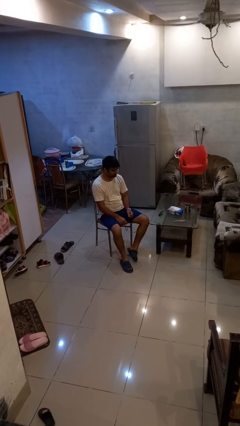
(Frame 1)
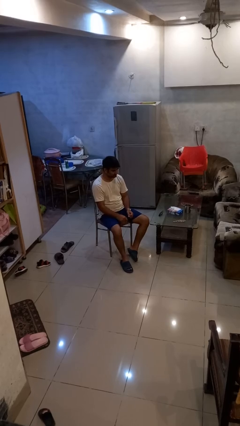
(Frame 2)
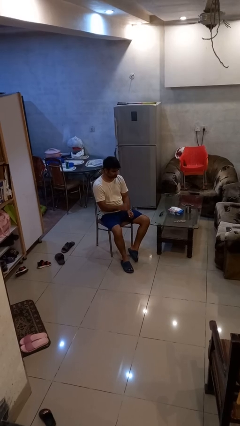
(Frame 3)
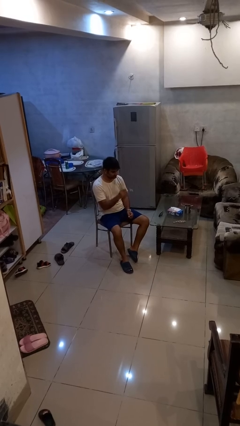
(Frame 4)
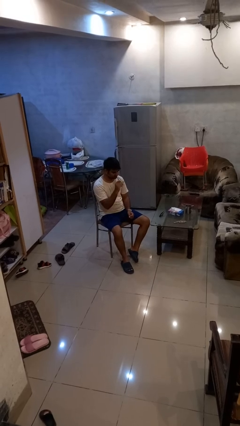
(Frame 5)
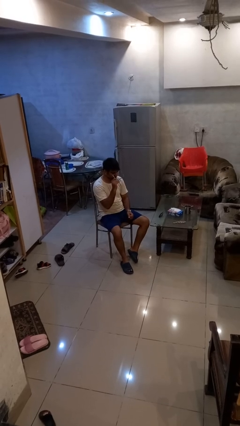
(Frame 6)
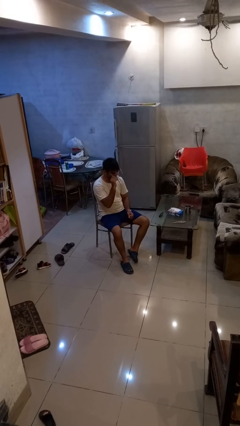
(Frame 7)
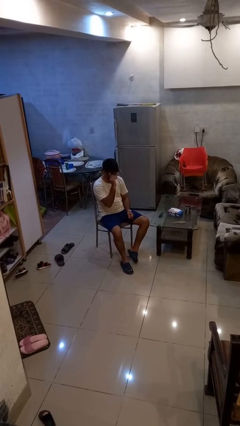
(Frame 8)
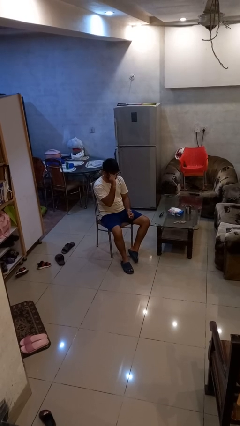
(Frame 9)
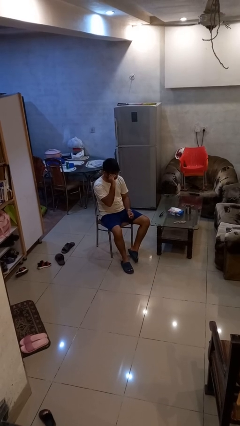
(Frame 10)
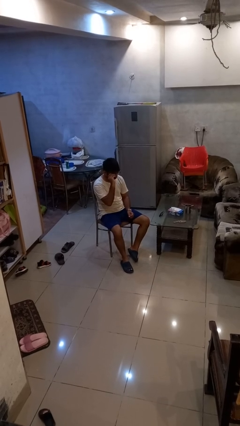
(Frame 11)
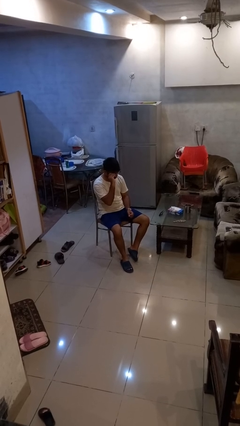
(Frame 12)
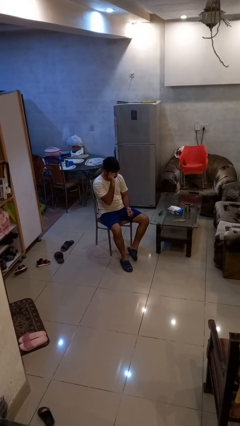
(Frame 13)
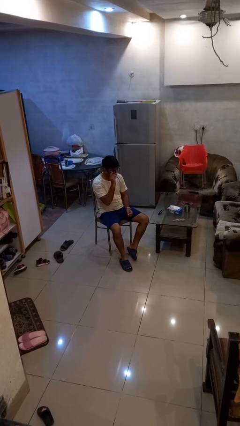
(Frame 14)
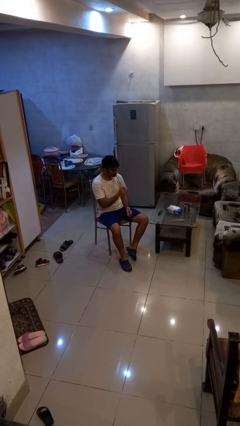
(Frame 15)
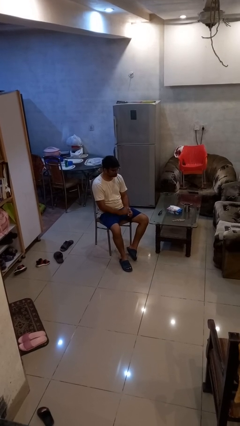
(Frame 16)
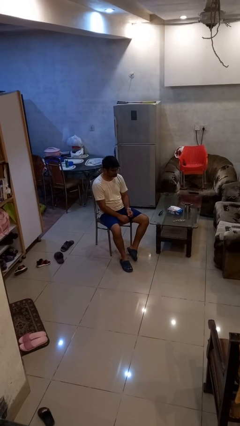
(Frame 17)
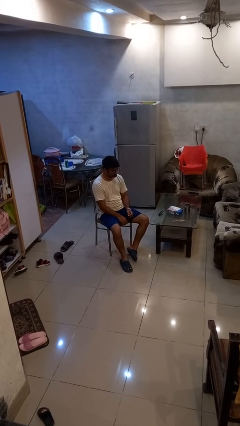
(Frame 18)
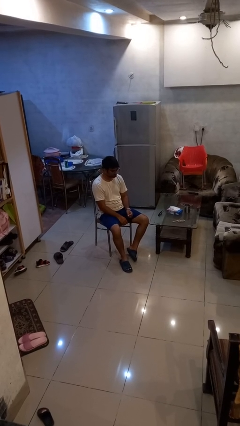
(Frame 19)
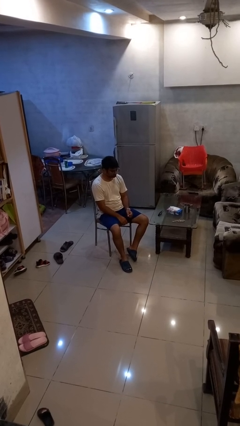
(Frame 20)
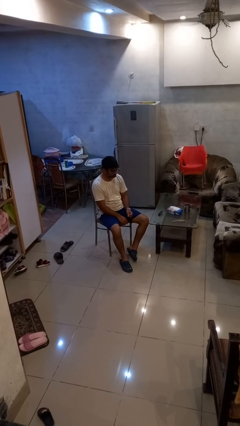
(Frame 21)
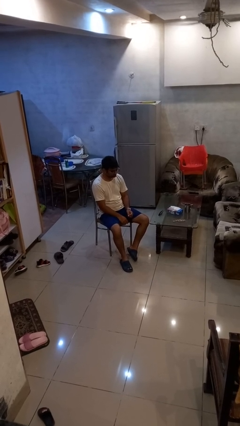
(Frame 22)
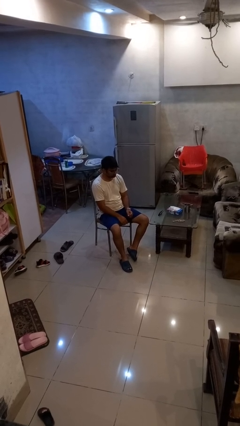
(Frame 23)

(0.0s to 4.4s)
person puts on glasses

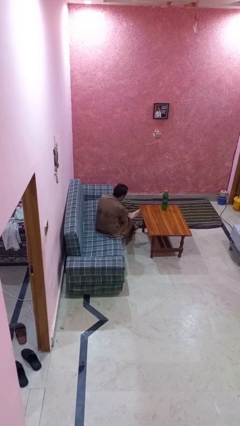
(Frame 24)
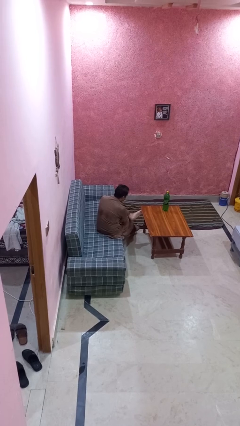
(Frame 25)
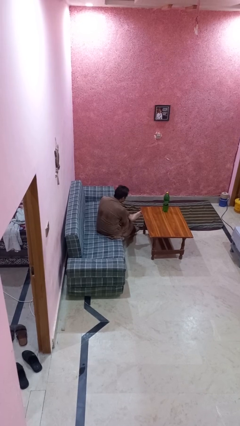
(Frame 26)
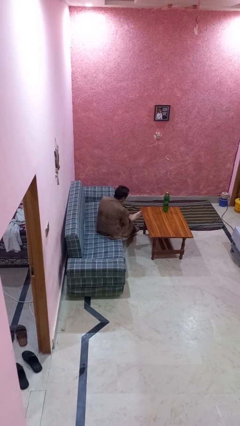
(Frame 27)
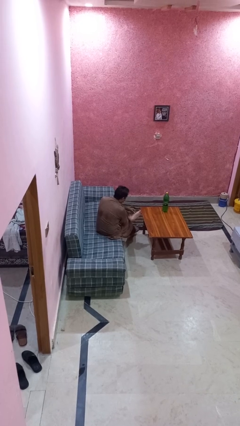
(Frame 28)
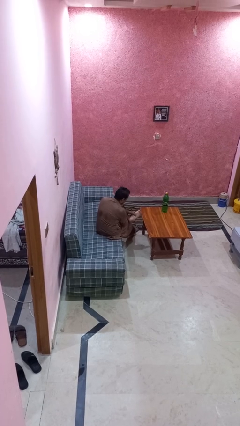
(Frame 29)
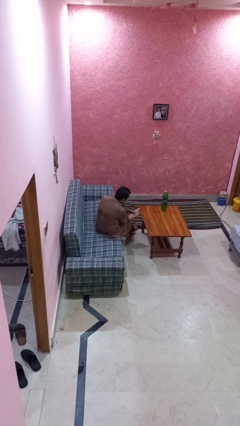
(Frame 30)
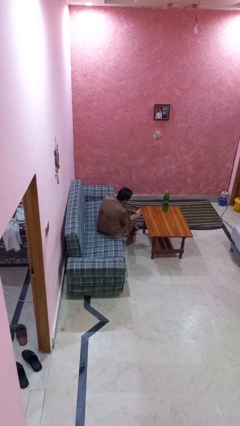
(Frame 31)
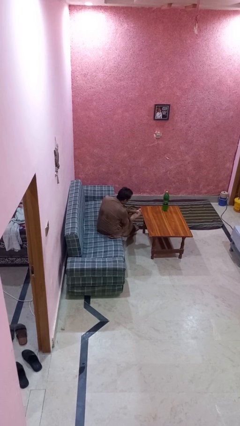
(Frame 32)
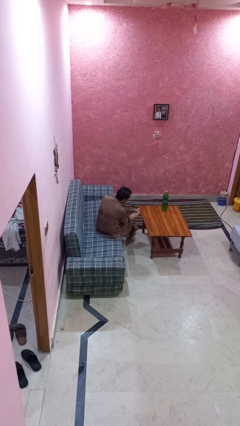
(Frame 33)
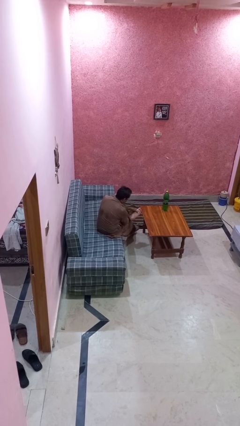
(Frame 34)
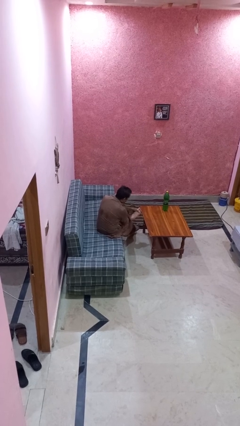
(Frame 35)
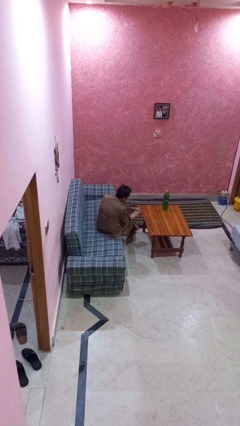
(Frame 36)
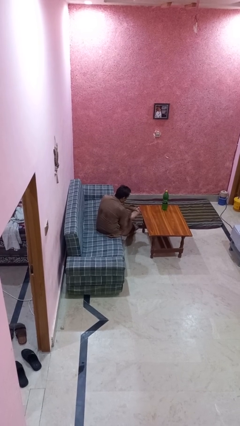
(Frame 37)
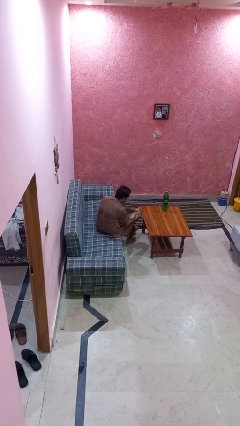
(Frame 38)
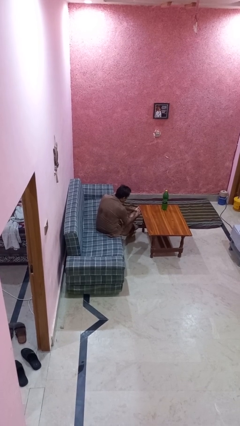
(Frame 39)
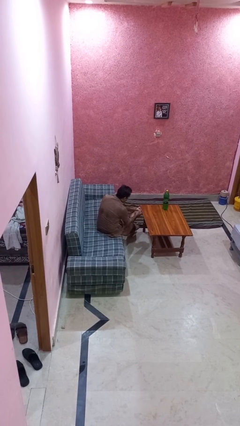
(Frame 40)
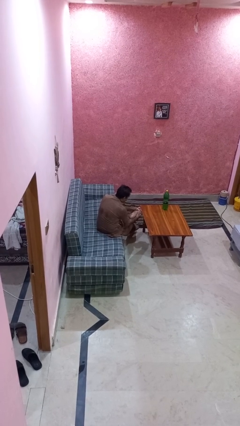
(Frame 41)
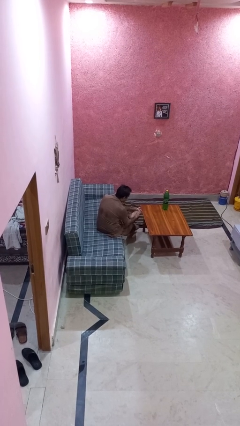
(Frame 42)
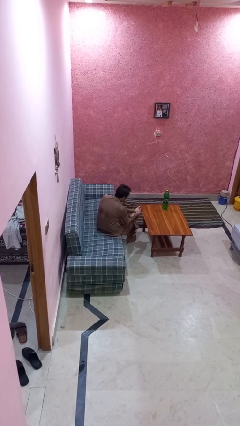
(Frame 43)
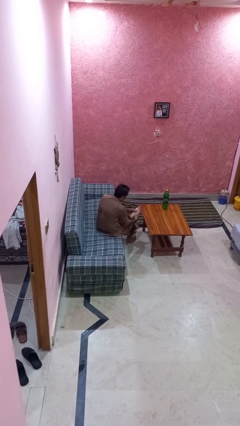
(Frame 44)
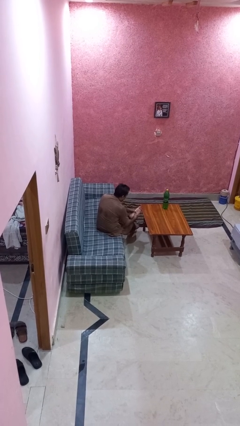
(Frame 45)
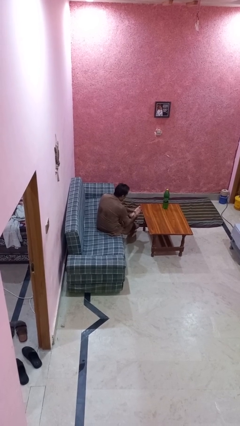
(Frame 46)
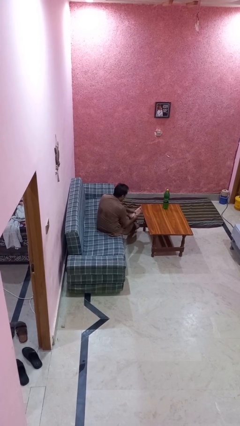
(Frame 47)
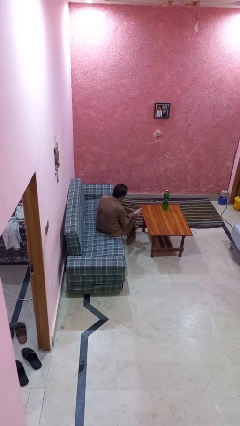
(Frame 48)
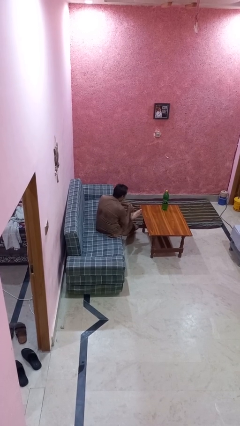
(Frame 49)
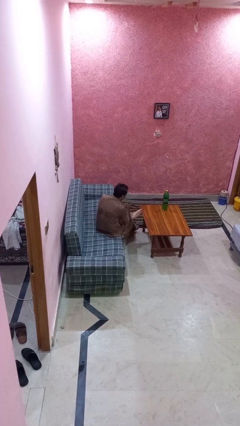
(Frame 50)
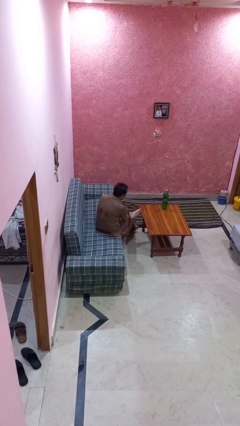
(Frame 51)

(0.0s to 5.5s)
person rubs foot

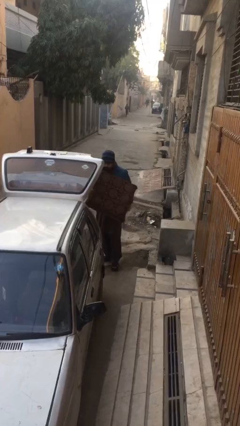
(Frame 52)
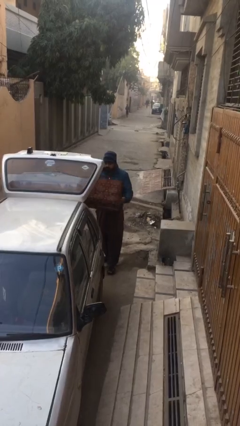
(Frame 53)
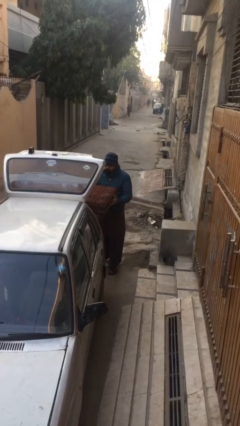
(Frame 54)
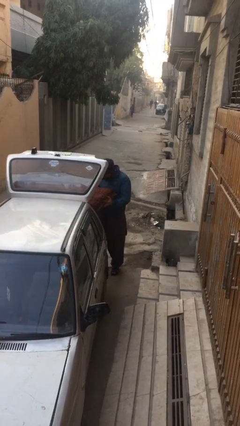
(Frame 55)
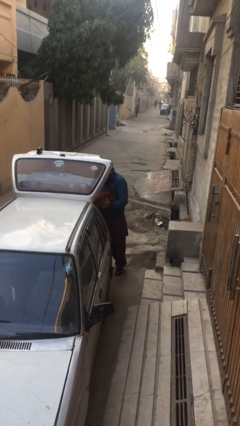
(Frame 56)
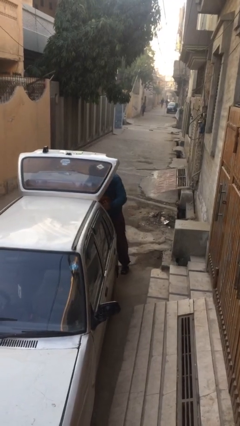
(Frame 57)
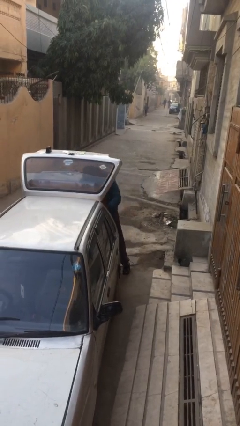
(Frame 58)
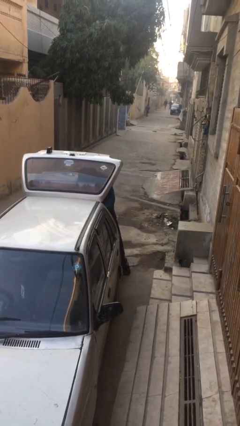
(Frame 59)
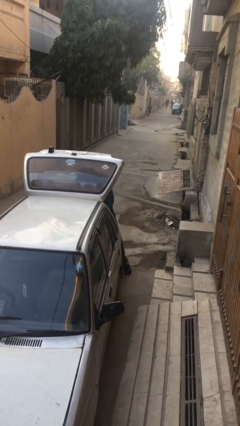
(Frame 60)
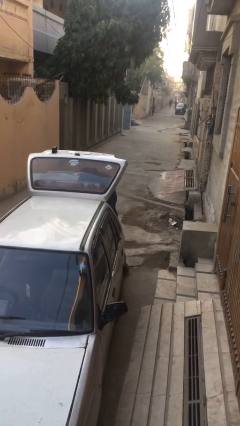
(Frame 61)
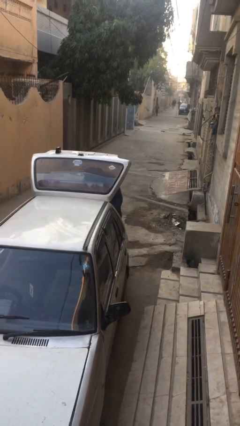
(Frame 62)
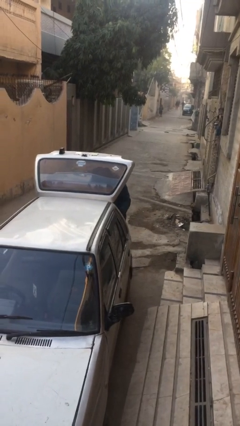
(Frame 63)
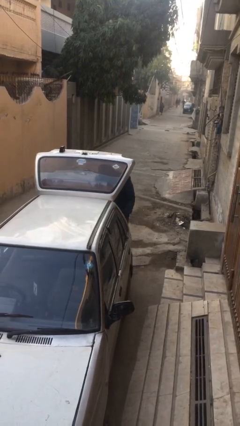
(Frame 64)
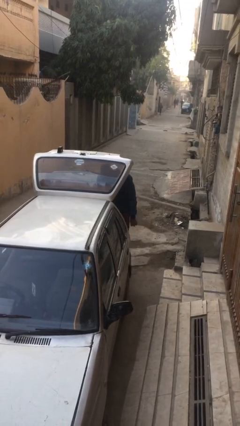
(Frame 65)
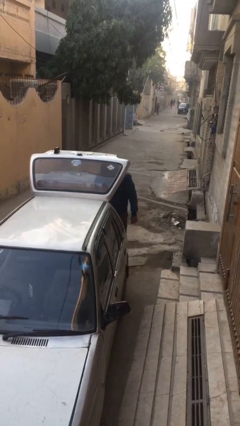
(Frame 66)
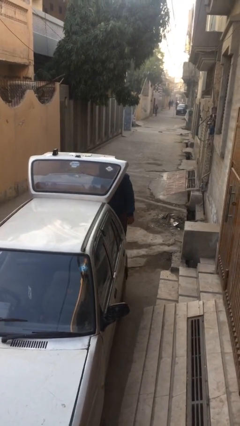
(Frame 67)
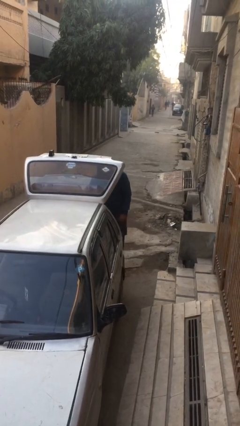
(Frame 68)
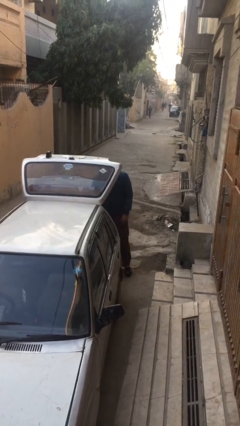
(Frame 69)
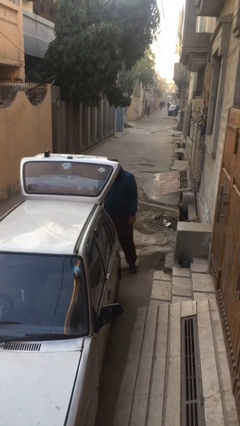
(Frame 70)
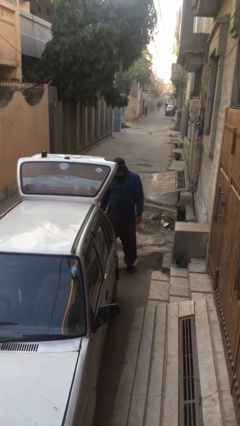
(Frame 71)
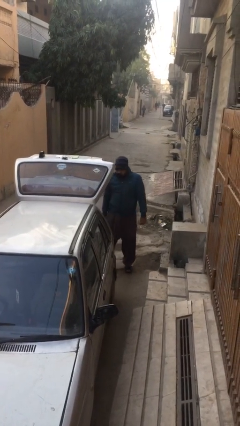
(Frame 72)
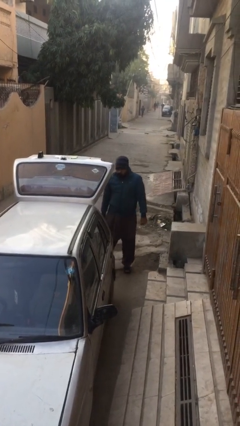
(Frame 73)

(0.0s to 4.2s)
person loads car

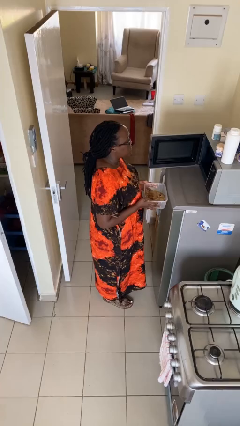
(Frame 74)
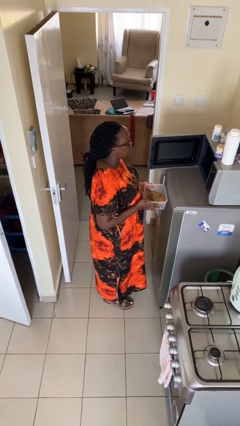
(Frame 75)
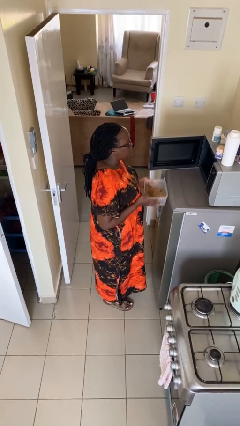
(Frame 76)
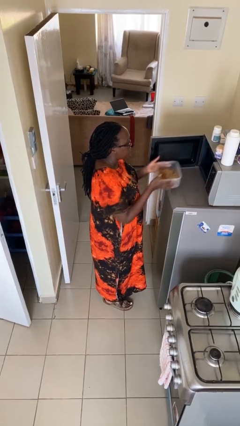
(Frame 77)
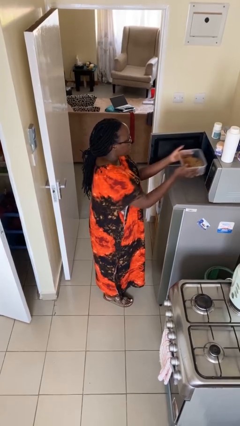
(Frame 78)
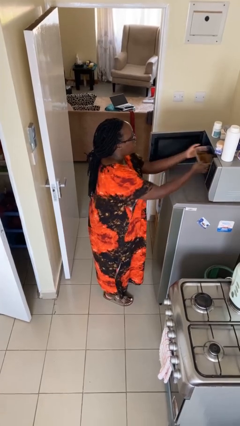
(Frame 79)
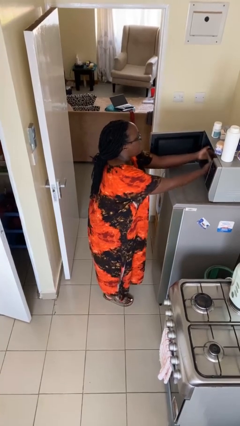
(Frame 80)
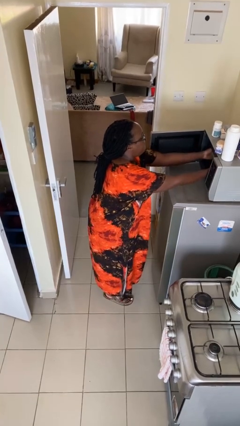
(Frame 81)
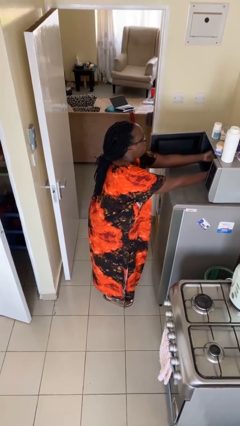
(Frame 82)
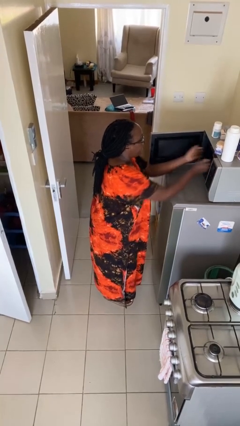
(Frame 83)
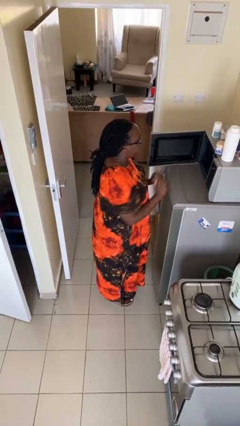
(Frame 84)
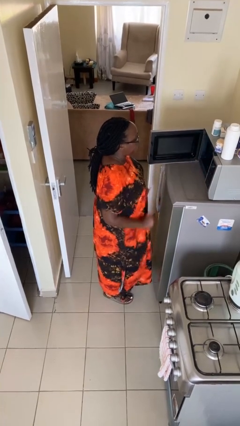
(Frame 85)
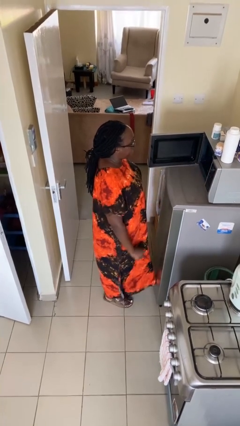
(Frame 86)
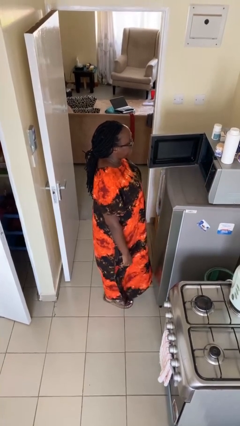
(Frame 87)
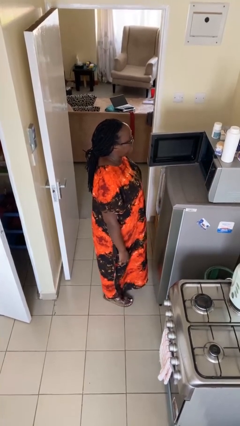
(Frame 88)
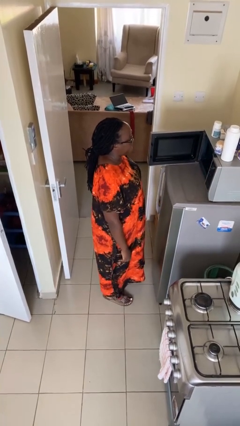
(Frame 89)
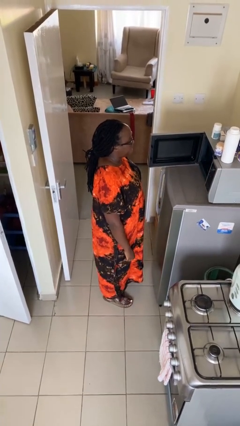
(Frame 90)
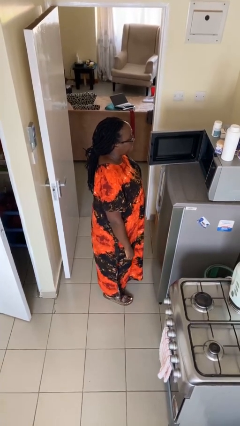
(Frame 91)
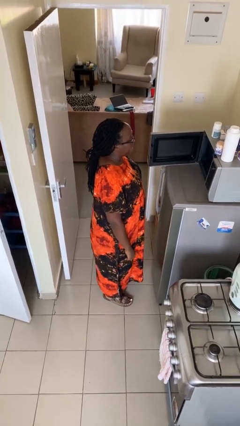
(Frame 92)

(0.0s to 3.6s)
person puts object into microwave

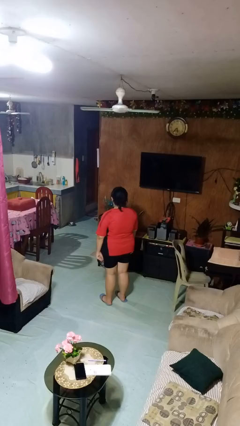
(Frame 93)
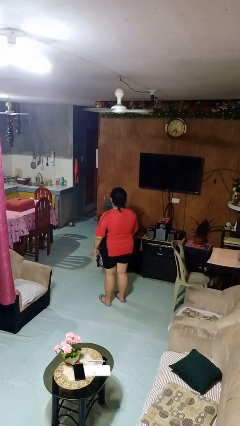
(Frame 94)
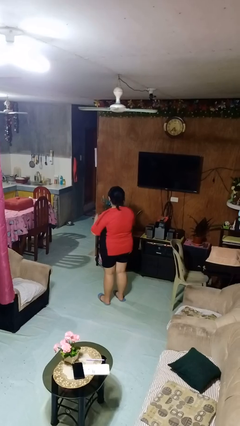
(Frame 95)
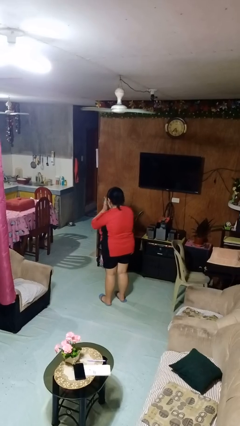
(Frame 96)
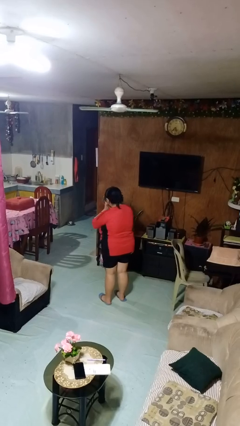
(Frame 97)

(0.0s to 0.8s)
person sneezes into hand
